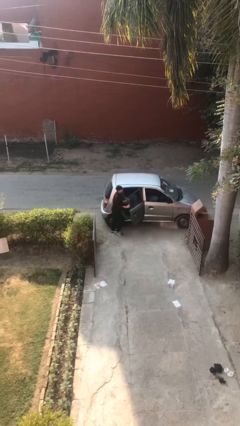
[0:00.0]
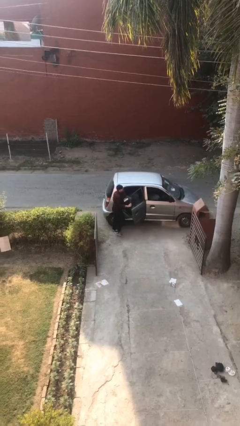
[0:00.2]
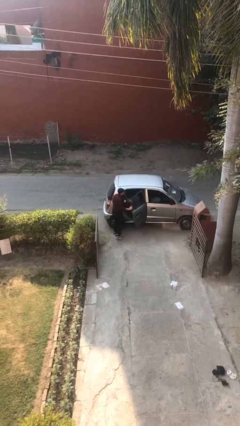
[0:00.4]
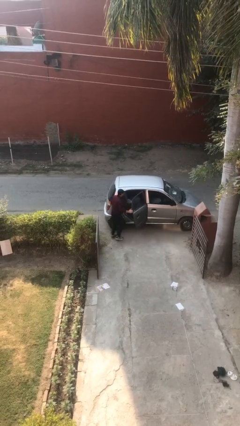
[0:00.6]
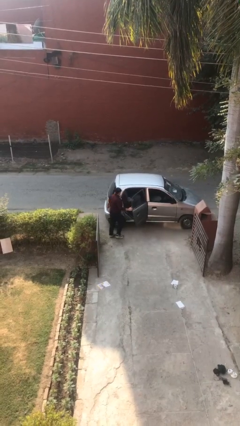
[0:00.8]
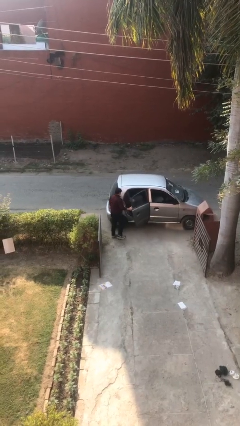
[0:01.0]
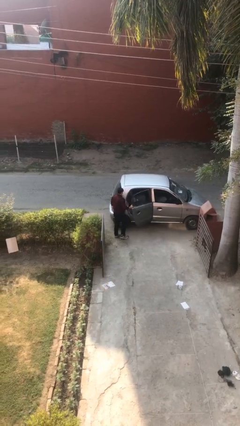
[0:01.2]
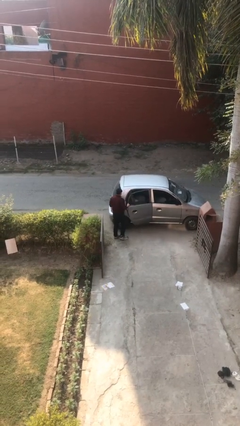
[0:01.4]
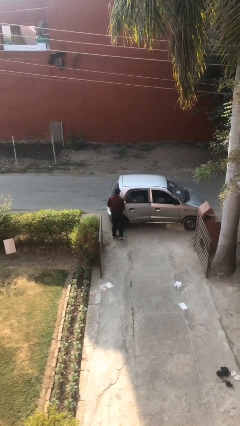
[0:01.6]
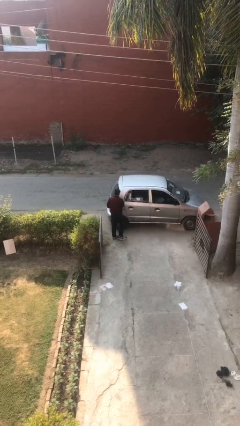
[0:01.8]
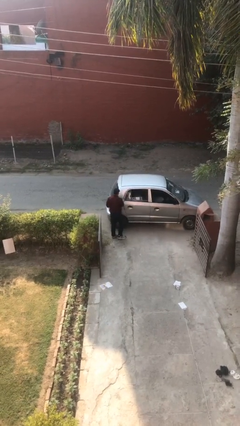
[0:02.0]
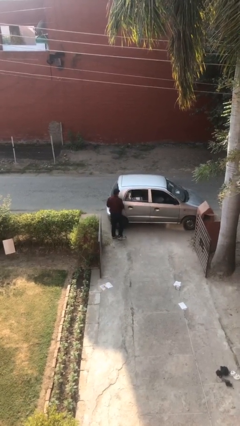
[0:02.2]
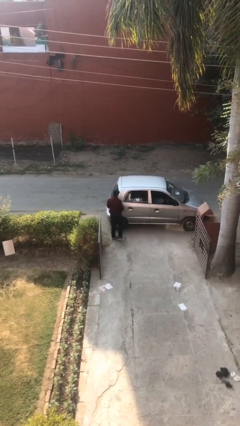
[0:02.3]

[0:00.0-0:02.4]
person closes car door

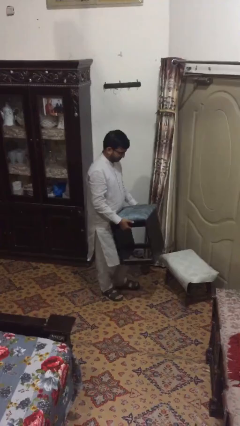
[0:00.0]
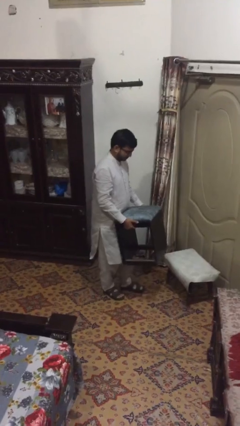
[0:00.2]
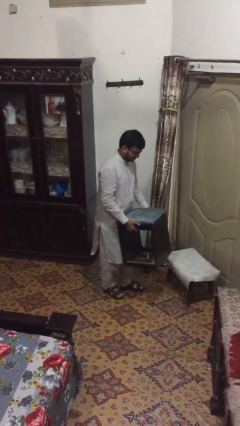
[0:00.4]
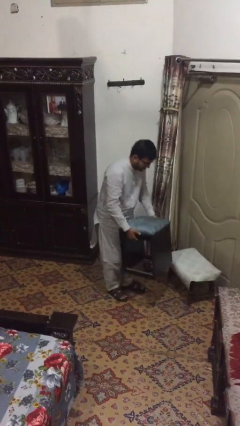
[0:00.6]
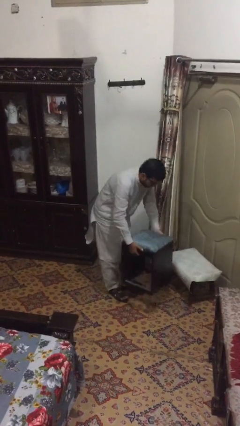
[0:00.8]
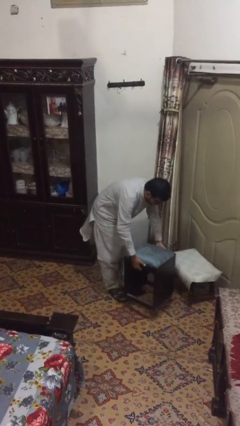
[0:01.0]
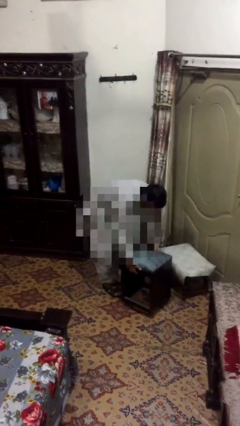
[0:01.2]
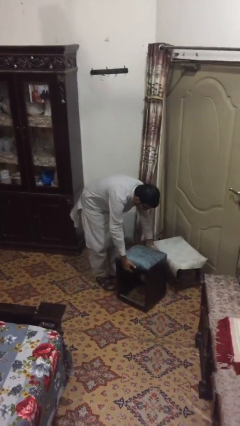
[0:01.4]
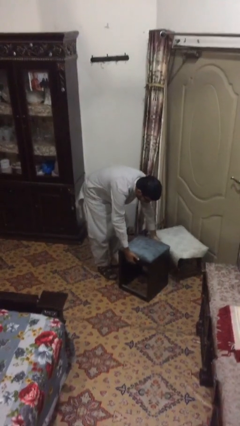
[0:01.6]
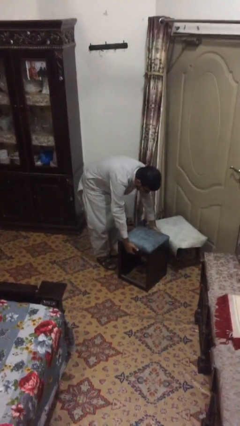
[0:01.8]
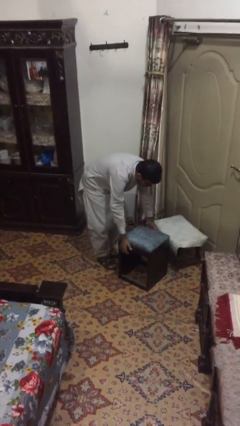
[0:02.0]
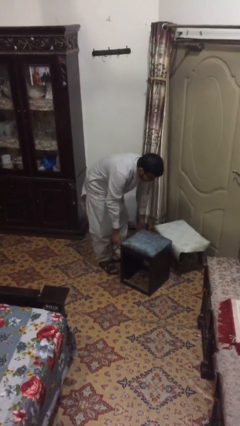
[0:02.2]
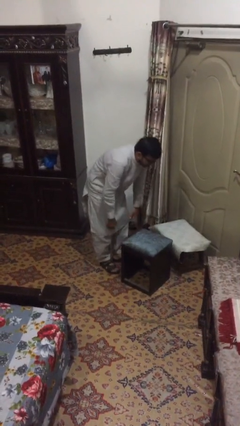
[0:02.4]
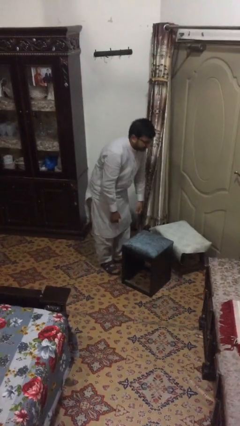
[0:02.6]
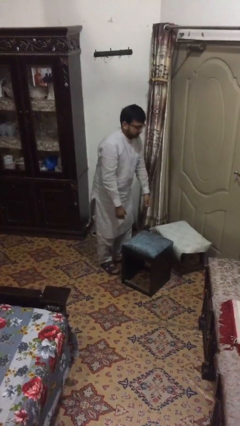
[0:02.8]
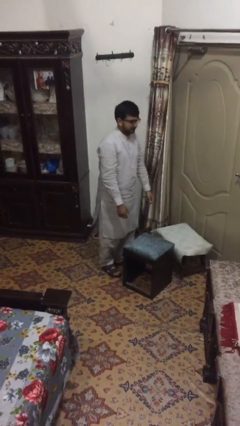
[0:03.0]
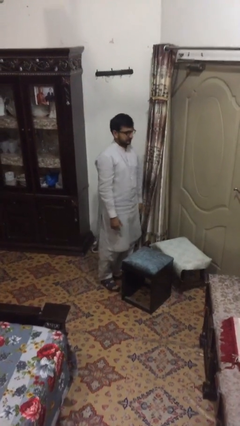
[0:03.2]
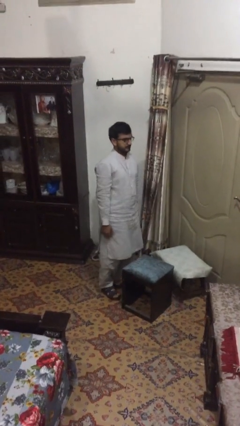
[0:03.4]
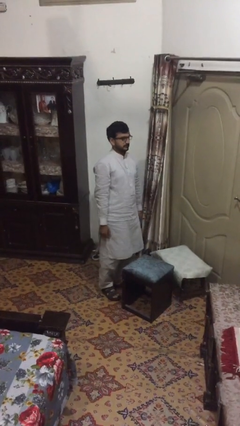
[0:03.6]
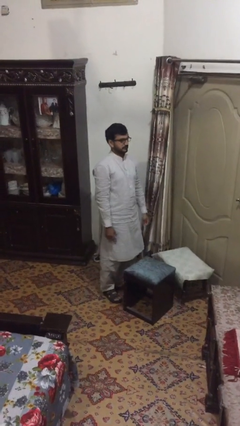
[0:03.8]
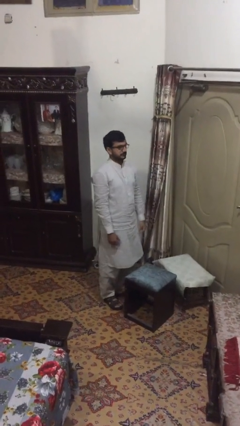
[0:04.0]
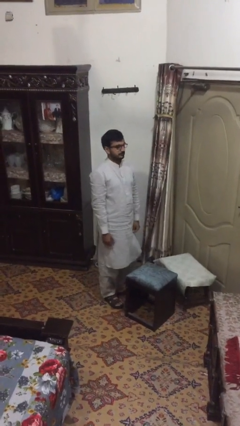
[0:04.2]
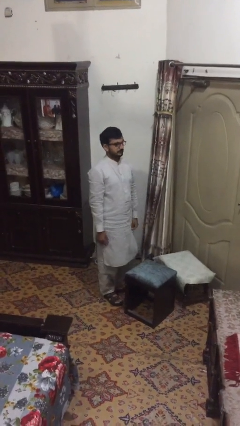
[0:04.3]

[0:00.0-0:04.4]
person puts down object on floor

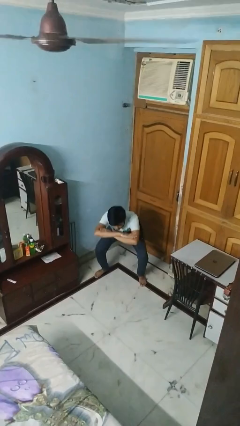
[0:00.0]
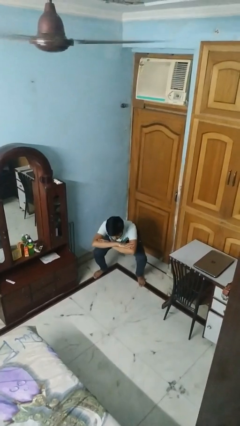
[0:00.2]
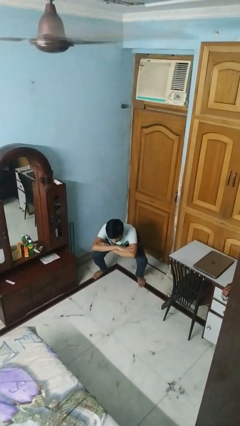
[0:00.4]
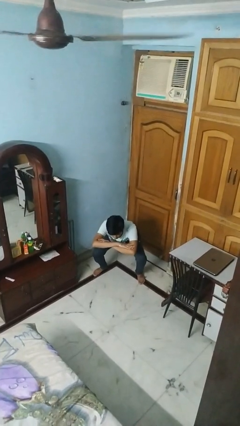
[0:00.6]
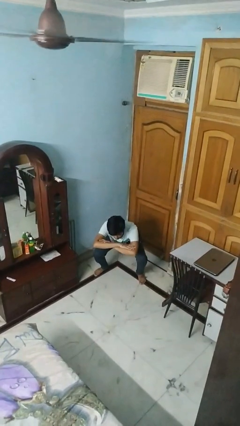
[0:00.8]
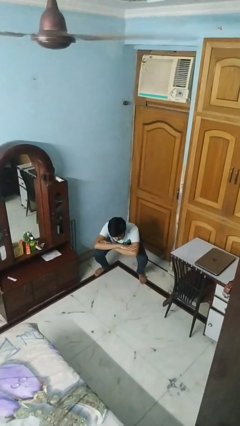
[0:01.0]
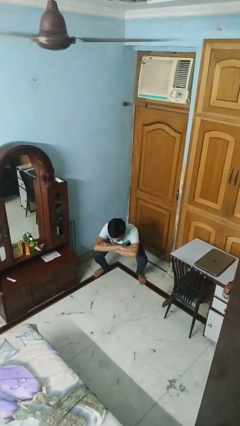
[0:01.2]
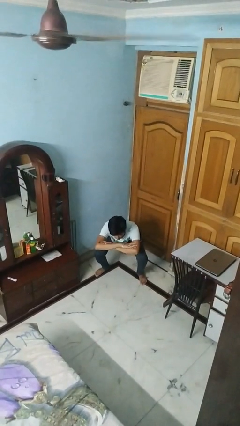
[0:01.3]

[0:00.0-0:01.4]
person squats

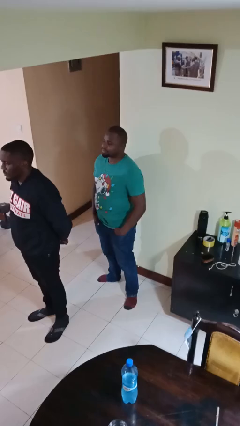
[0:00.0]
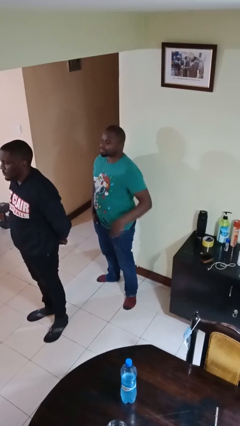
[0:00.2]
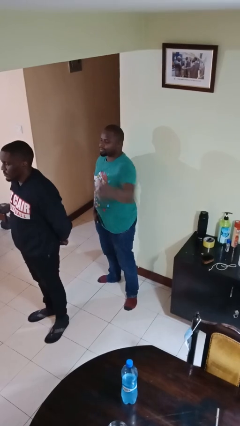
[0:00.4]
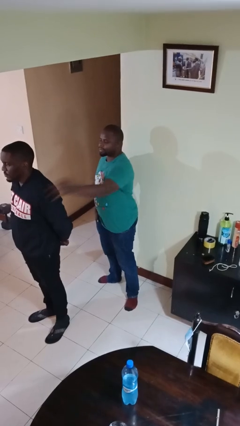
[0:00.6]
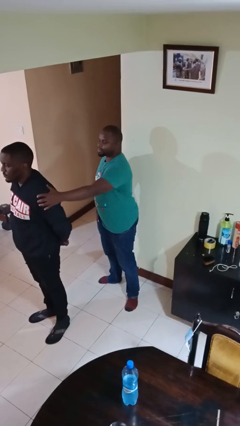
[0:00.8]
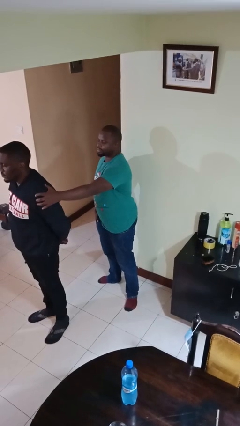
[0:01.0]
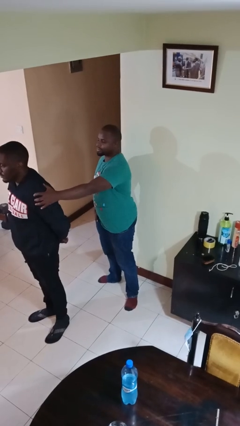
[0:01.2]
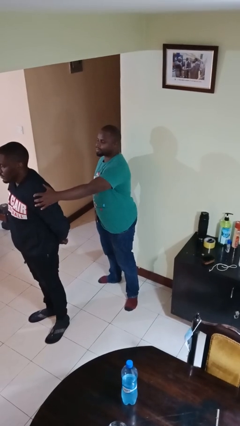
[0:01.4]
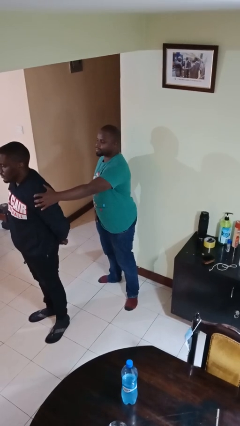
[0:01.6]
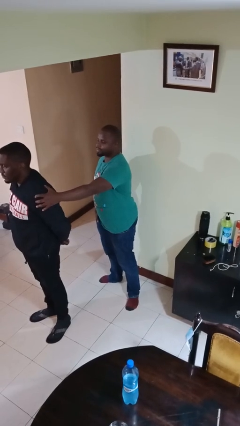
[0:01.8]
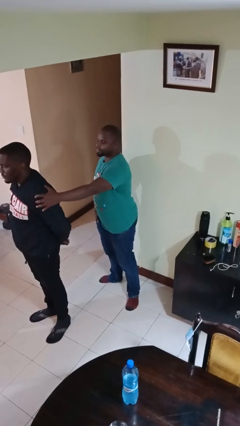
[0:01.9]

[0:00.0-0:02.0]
person grabs person by shoulder

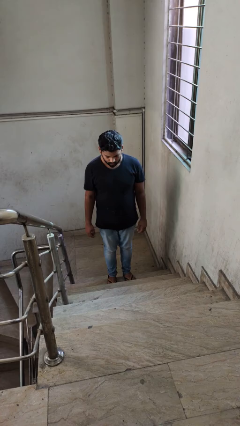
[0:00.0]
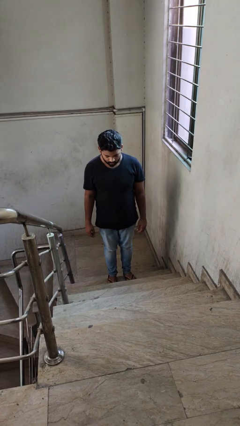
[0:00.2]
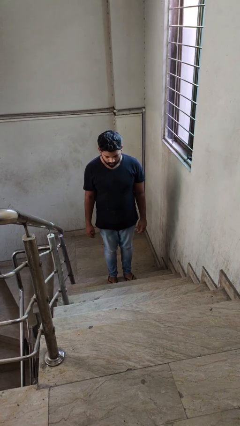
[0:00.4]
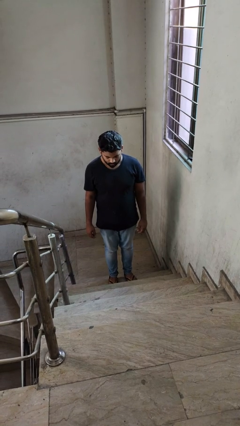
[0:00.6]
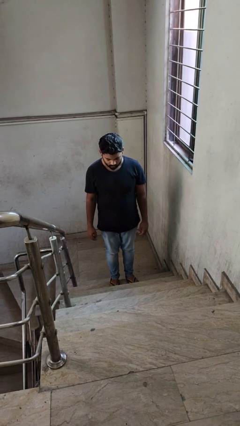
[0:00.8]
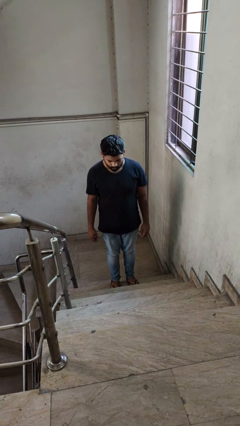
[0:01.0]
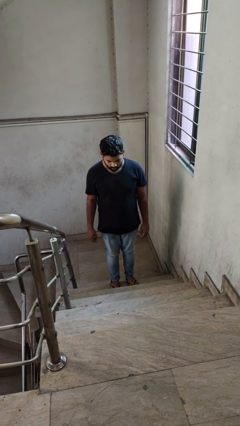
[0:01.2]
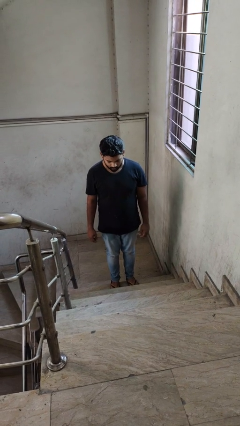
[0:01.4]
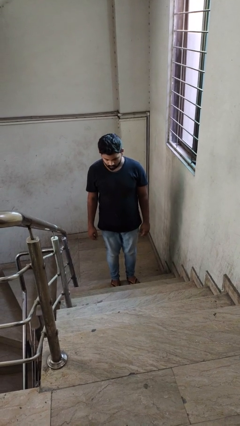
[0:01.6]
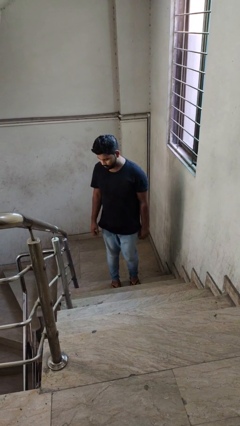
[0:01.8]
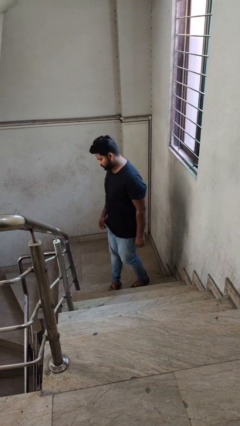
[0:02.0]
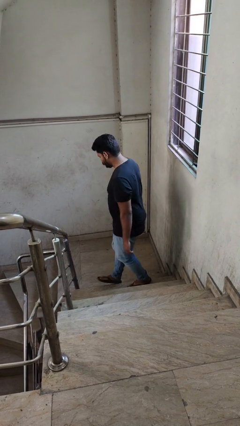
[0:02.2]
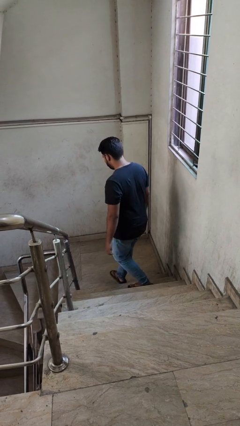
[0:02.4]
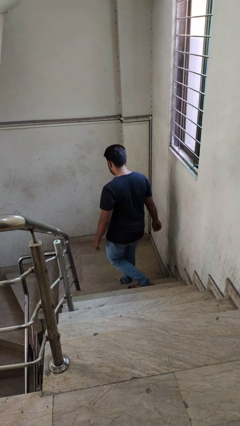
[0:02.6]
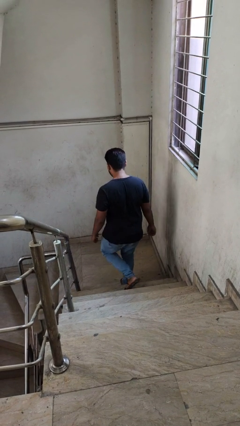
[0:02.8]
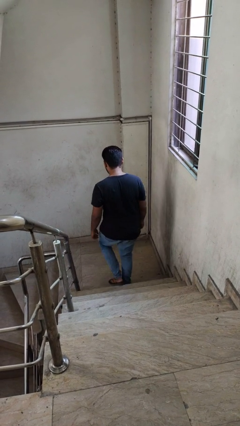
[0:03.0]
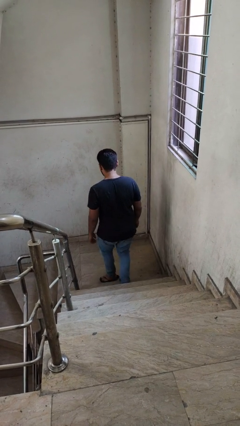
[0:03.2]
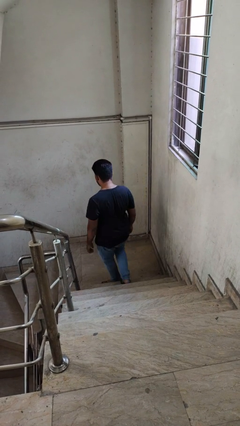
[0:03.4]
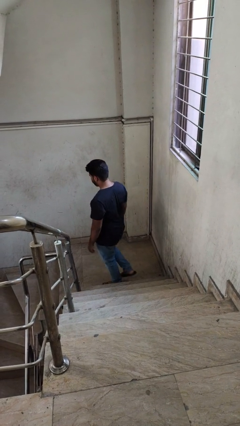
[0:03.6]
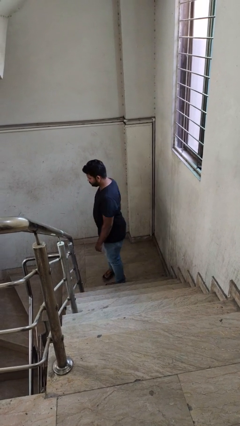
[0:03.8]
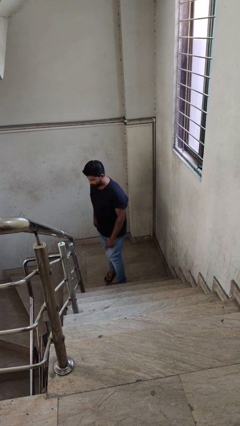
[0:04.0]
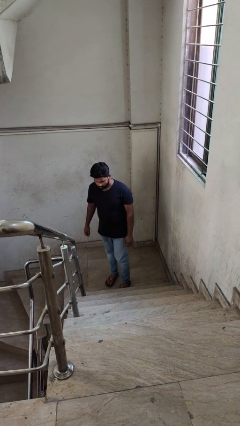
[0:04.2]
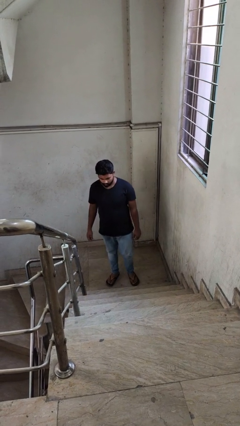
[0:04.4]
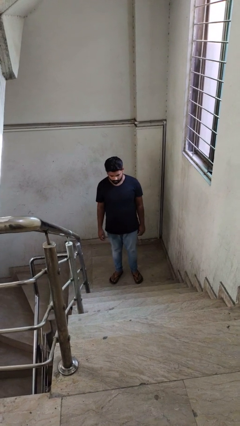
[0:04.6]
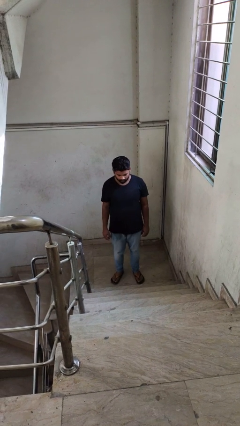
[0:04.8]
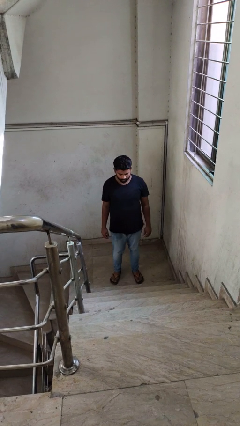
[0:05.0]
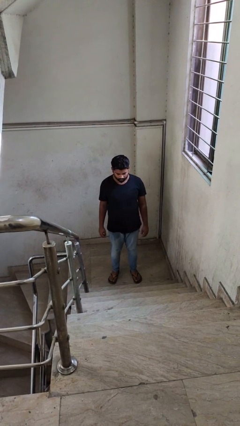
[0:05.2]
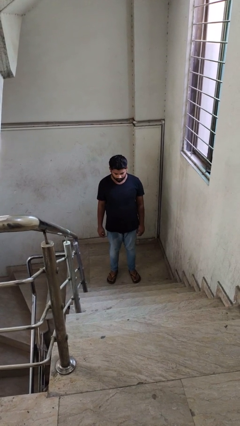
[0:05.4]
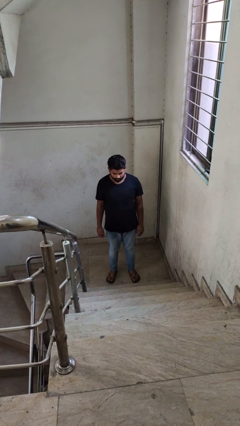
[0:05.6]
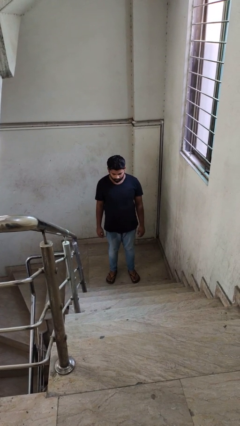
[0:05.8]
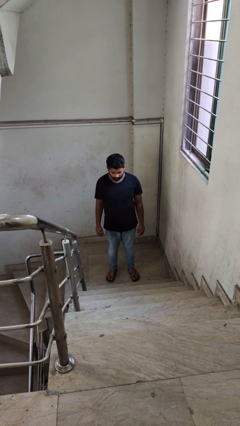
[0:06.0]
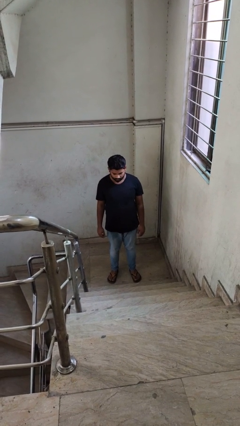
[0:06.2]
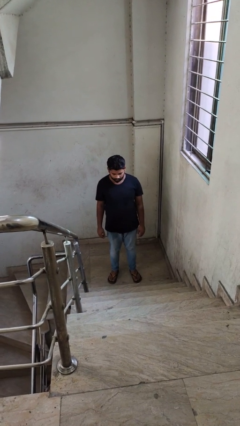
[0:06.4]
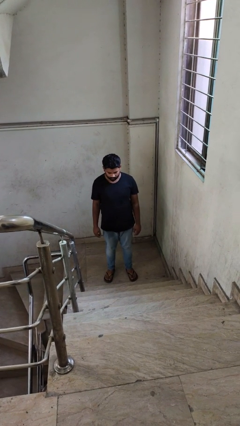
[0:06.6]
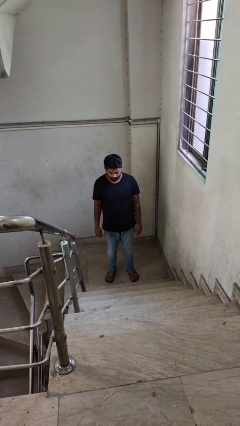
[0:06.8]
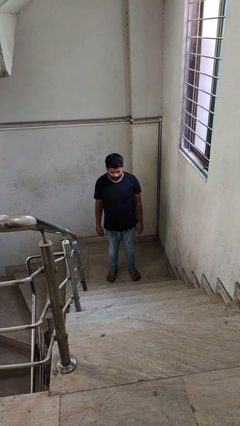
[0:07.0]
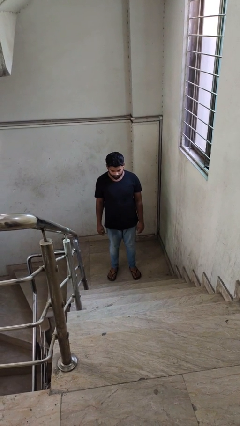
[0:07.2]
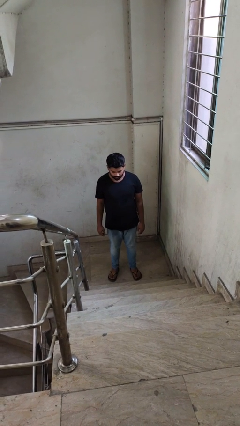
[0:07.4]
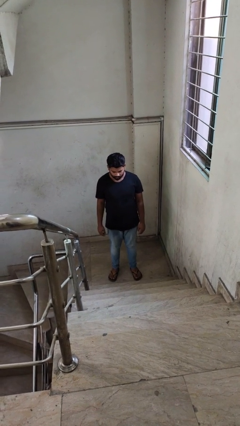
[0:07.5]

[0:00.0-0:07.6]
person climbs down stairs

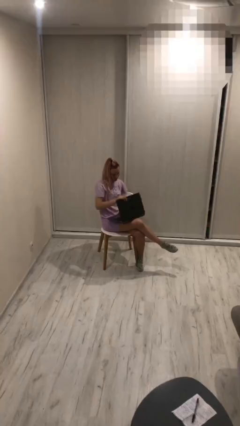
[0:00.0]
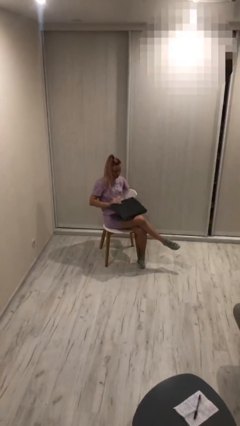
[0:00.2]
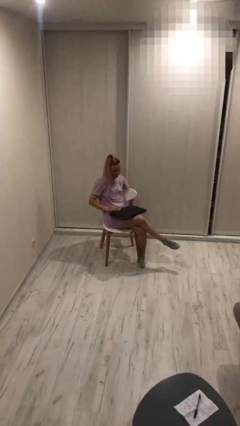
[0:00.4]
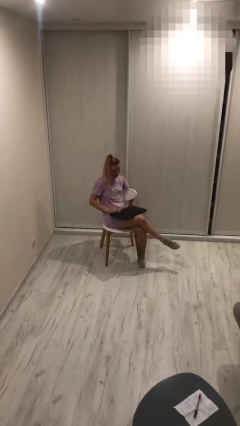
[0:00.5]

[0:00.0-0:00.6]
person closes laptop
